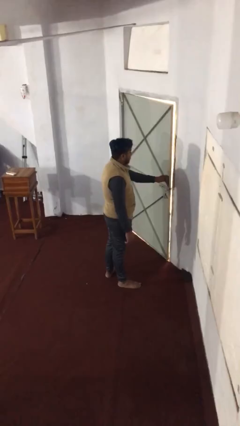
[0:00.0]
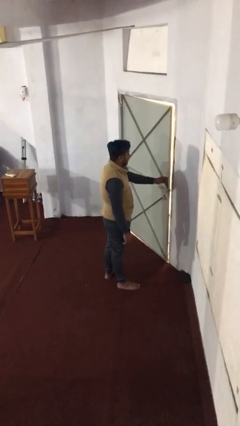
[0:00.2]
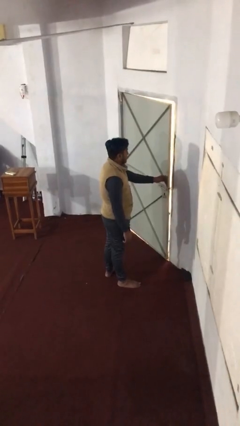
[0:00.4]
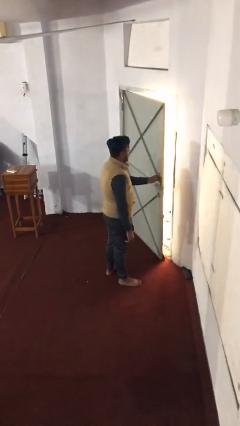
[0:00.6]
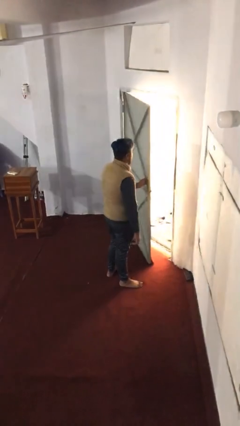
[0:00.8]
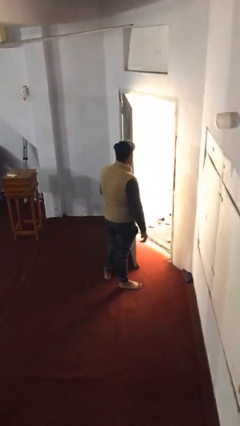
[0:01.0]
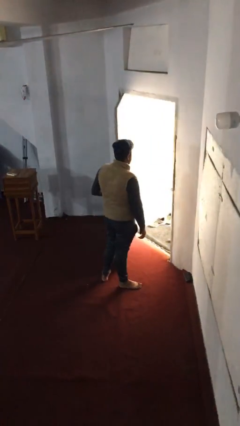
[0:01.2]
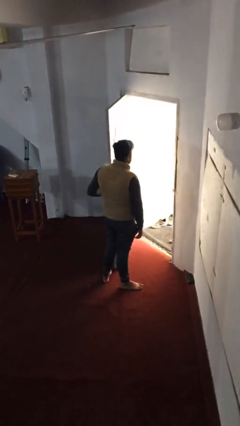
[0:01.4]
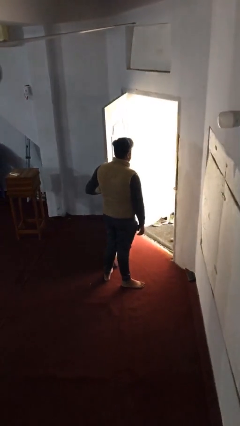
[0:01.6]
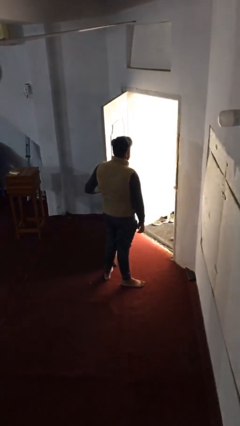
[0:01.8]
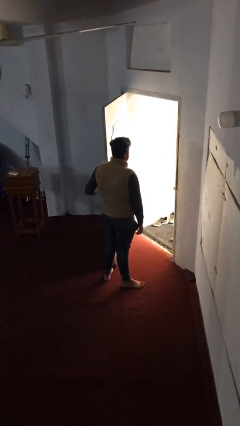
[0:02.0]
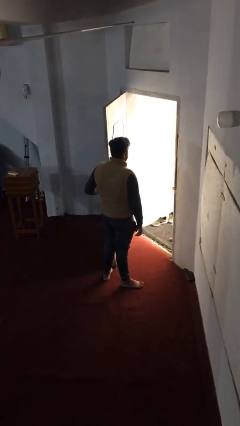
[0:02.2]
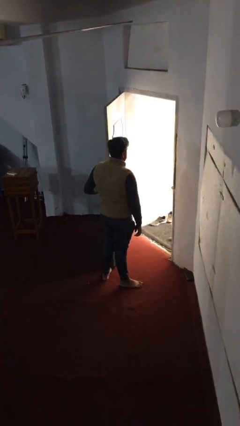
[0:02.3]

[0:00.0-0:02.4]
person opens facility door

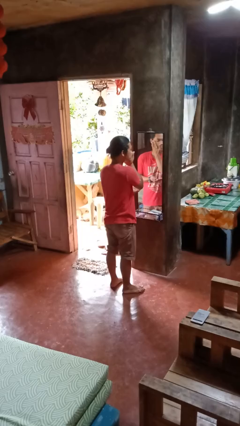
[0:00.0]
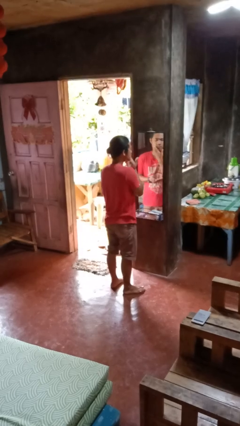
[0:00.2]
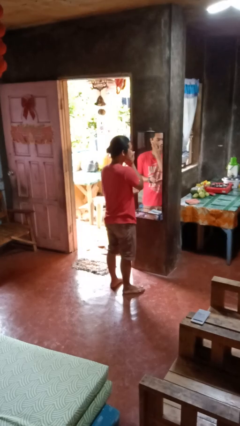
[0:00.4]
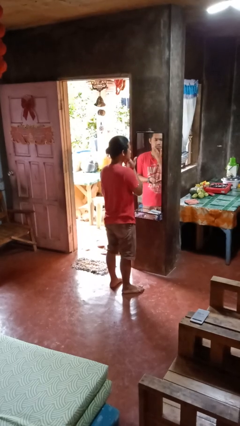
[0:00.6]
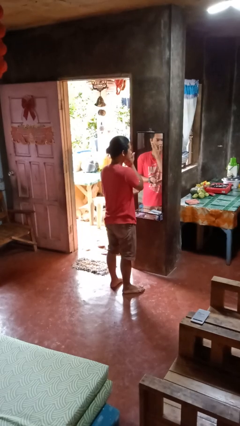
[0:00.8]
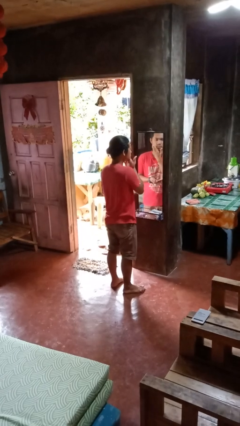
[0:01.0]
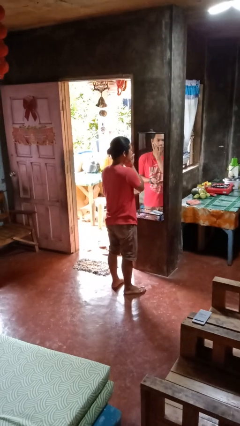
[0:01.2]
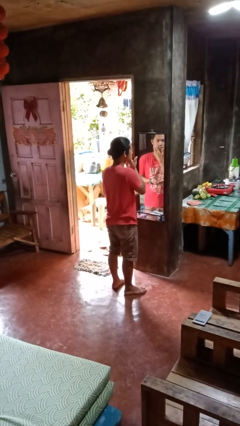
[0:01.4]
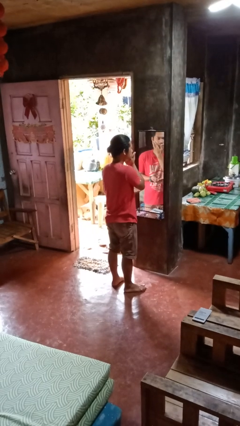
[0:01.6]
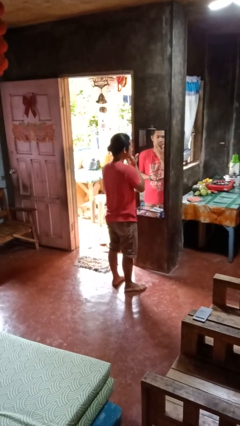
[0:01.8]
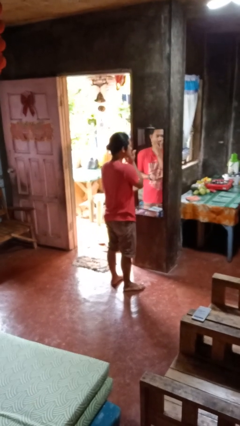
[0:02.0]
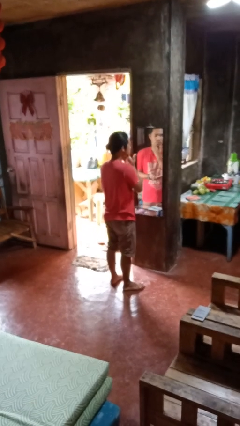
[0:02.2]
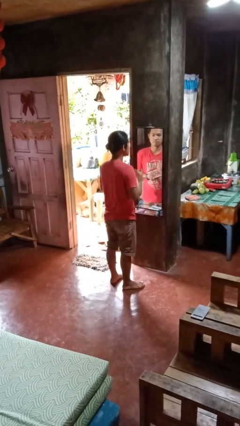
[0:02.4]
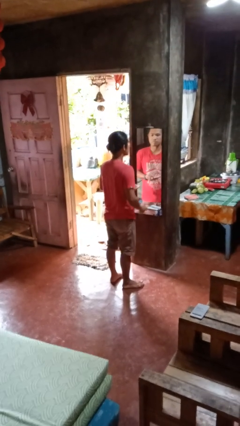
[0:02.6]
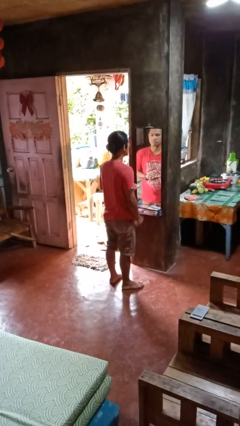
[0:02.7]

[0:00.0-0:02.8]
person applies foundation makeup

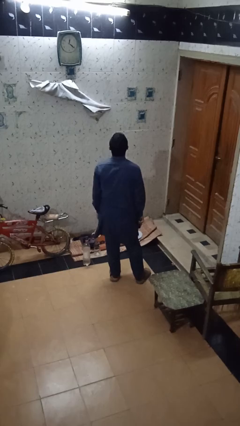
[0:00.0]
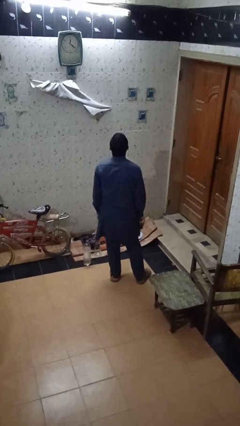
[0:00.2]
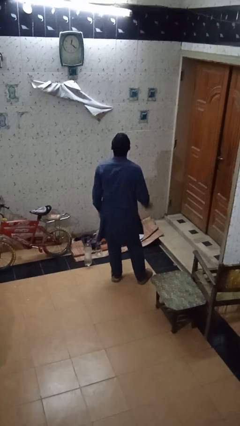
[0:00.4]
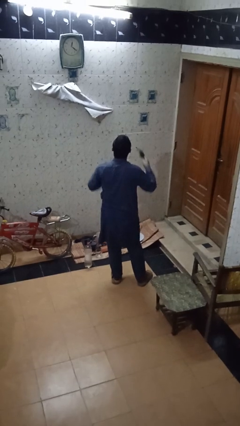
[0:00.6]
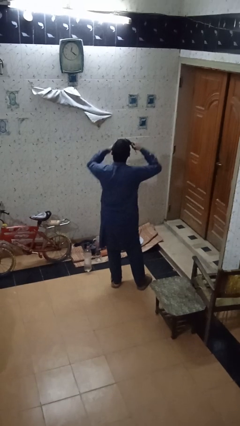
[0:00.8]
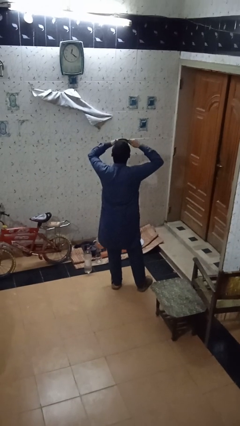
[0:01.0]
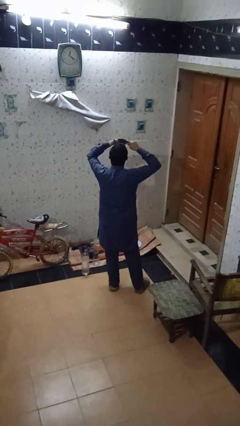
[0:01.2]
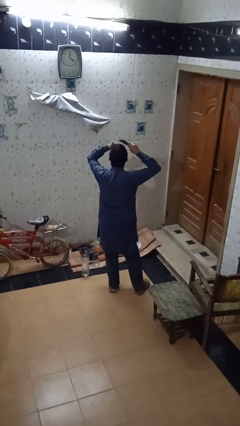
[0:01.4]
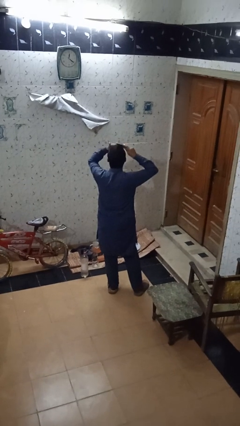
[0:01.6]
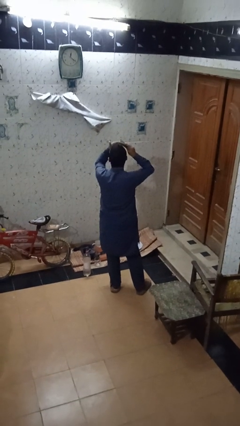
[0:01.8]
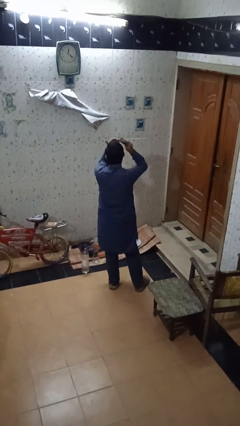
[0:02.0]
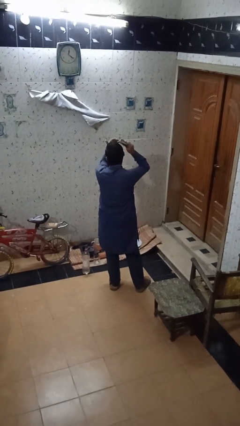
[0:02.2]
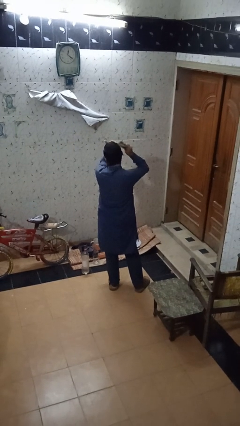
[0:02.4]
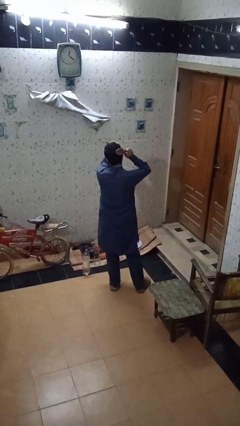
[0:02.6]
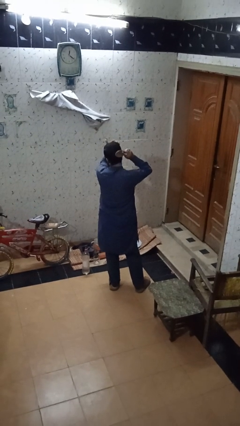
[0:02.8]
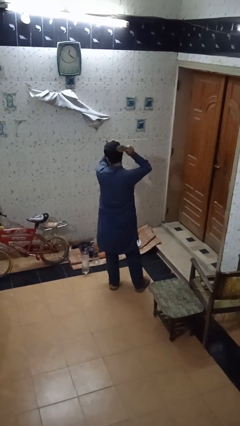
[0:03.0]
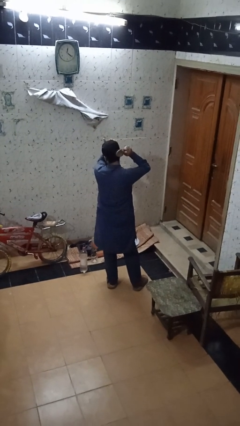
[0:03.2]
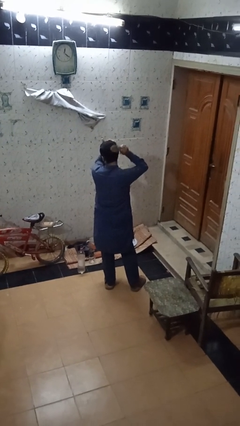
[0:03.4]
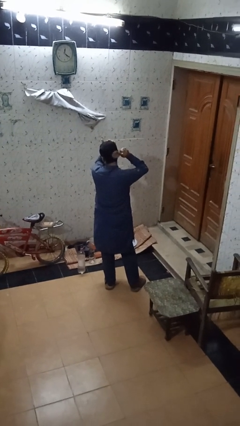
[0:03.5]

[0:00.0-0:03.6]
person brushes hair

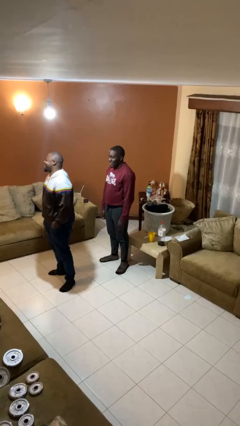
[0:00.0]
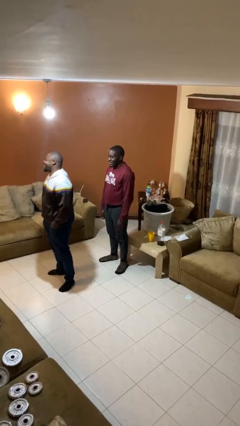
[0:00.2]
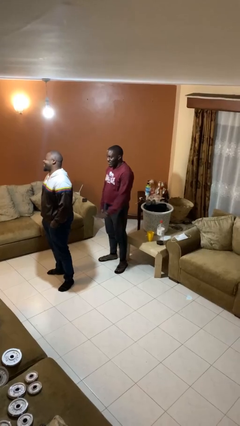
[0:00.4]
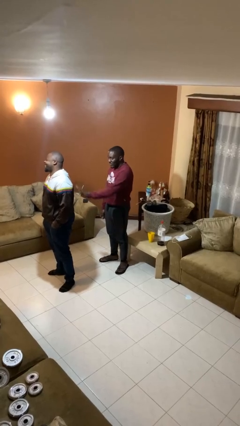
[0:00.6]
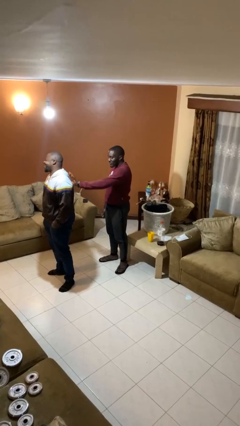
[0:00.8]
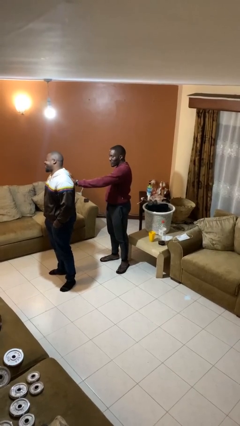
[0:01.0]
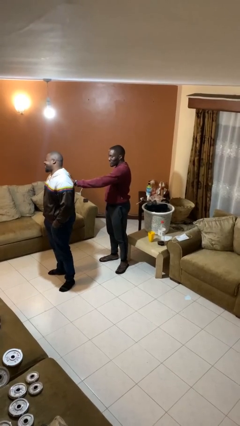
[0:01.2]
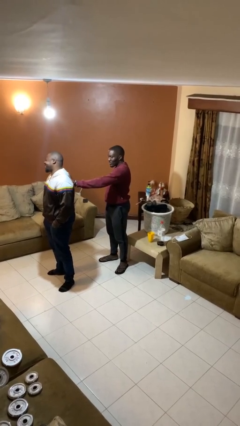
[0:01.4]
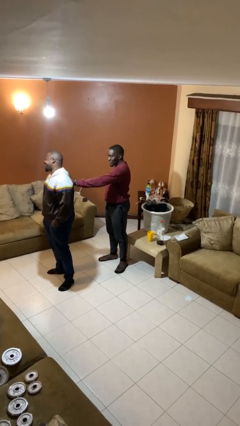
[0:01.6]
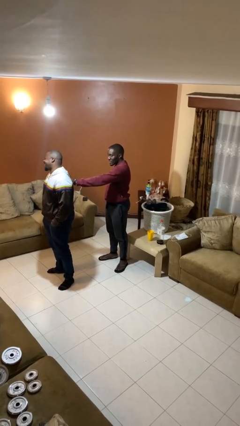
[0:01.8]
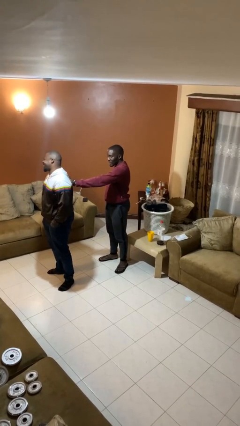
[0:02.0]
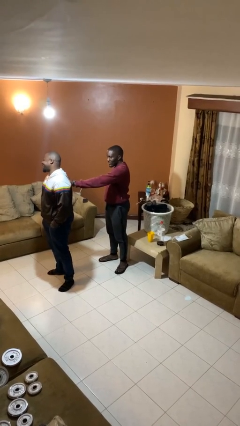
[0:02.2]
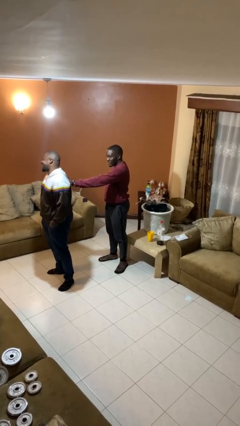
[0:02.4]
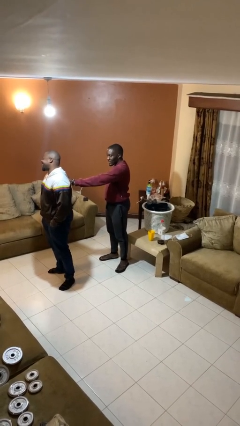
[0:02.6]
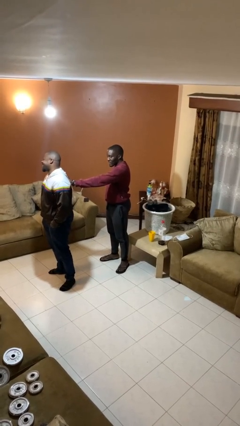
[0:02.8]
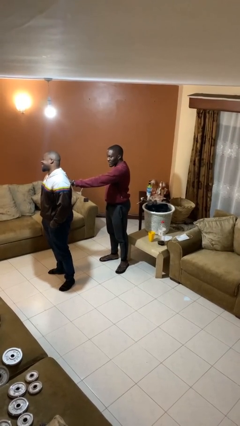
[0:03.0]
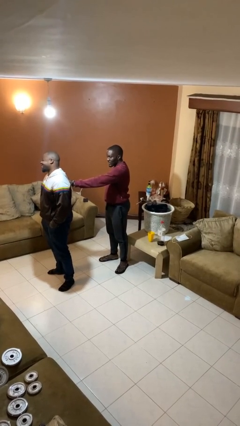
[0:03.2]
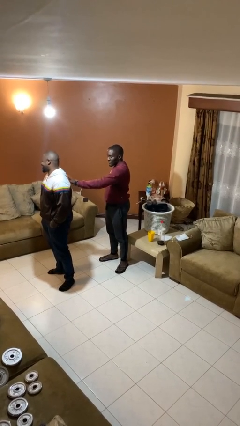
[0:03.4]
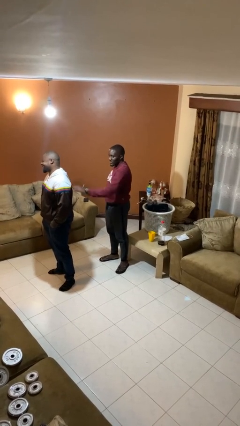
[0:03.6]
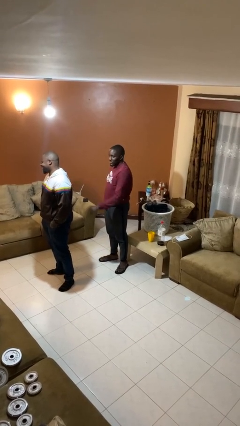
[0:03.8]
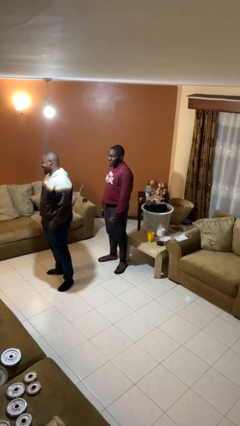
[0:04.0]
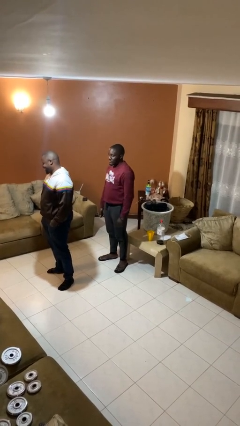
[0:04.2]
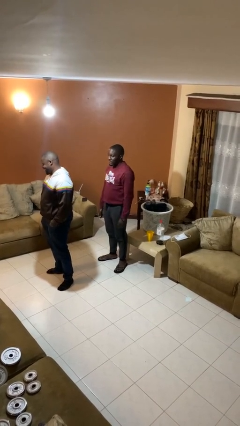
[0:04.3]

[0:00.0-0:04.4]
person touches back of person

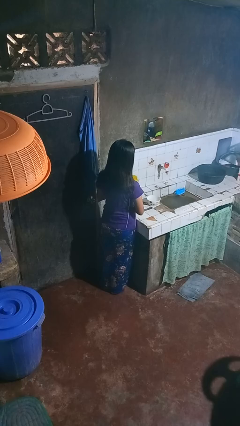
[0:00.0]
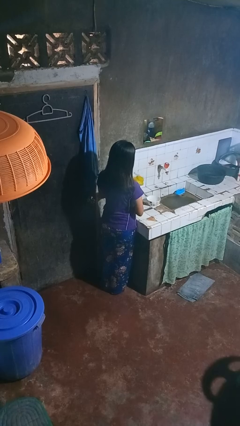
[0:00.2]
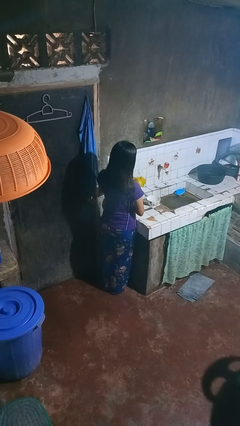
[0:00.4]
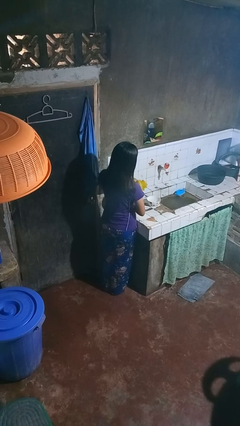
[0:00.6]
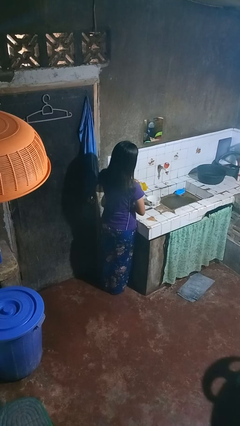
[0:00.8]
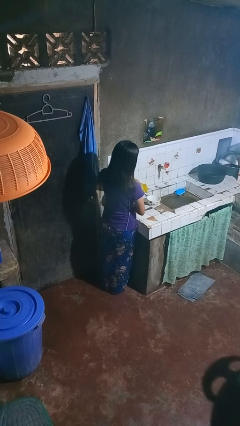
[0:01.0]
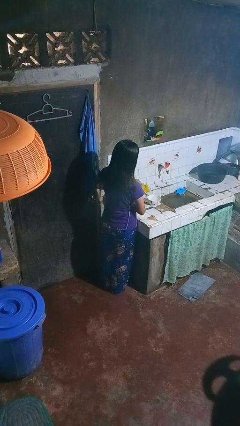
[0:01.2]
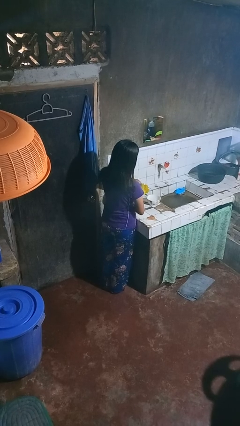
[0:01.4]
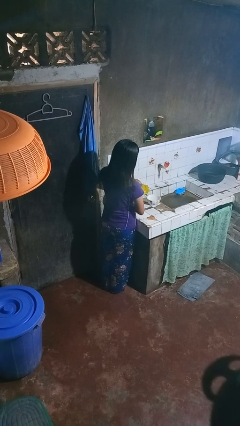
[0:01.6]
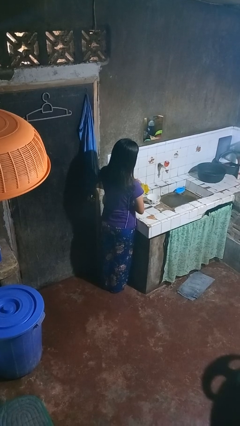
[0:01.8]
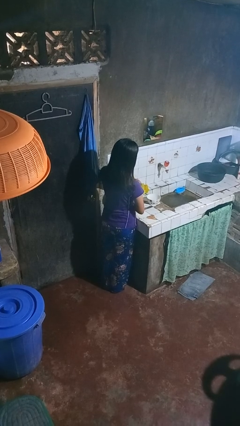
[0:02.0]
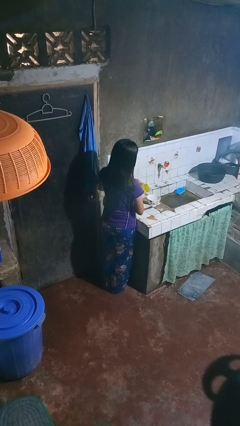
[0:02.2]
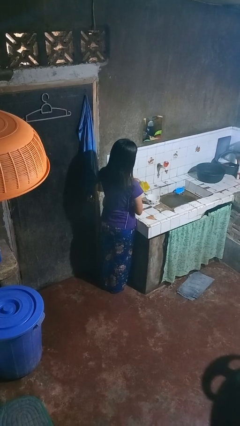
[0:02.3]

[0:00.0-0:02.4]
person pours into bowl

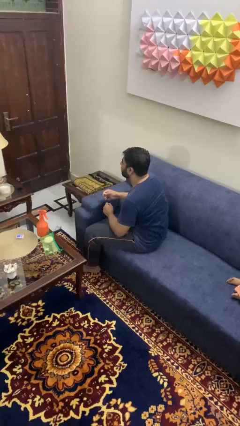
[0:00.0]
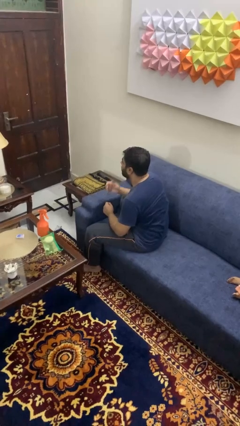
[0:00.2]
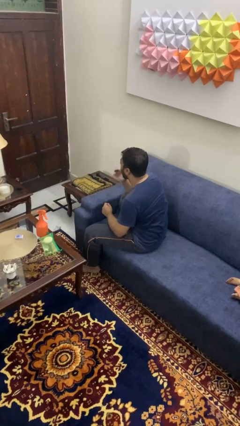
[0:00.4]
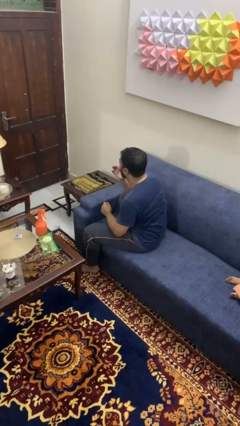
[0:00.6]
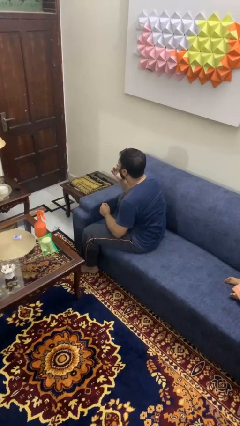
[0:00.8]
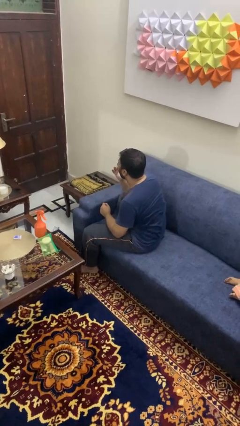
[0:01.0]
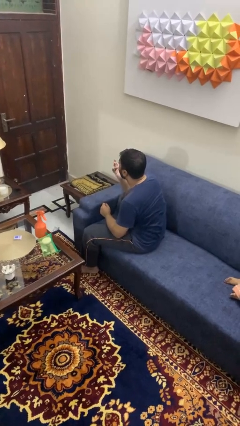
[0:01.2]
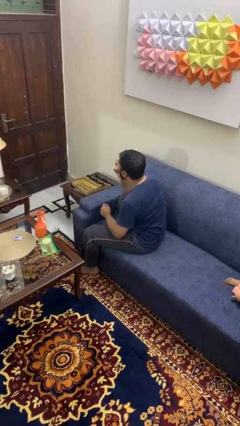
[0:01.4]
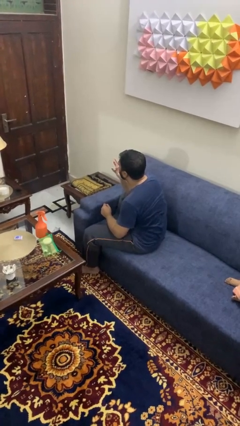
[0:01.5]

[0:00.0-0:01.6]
person licks fingers
